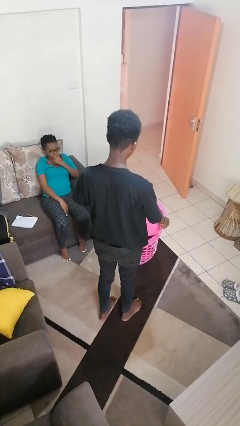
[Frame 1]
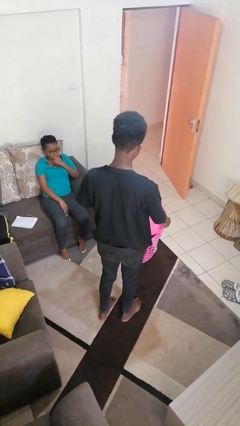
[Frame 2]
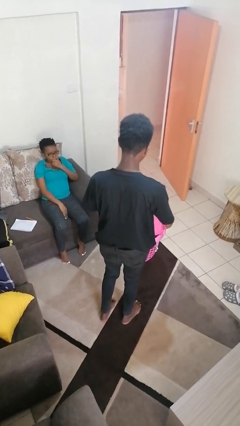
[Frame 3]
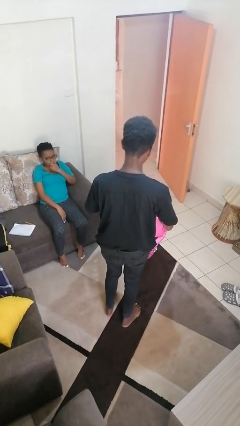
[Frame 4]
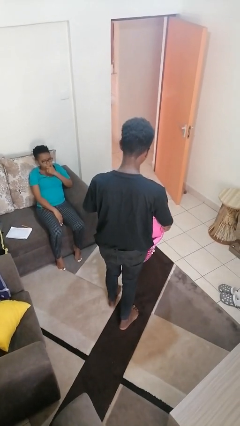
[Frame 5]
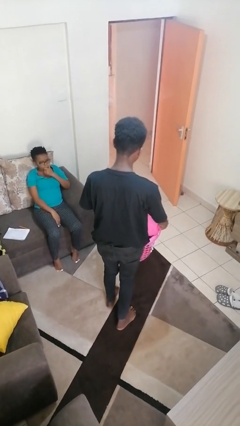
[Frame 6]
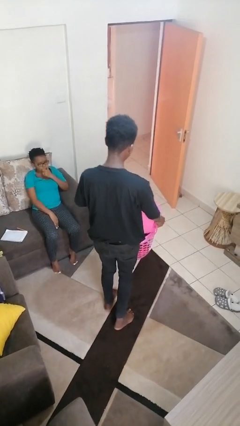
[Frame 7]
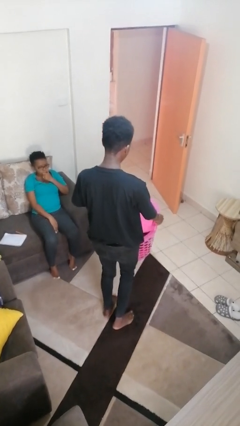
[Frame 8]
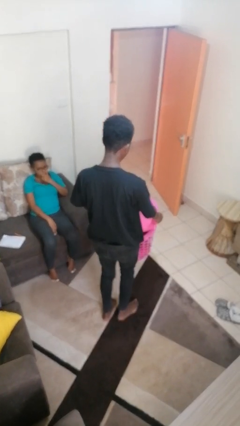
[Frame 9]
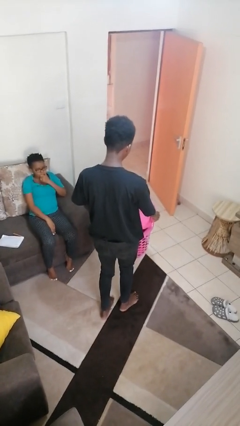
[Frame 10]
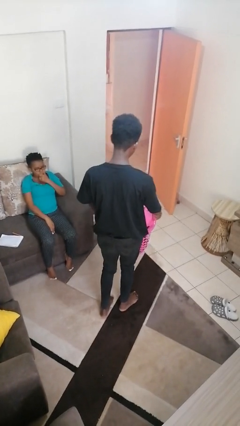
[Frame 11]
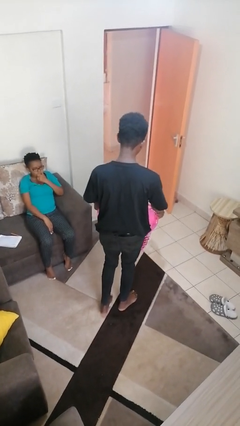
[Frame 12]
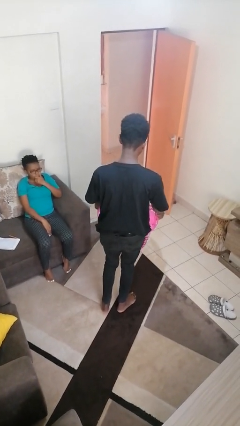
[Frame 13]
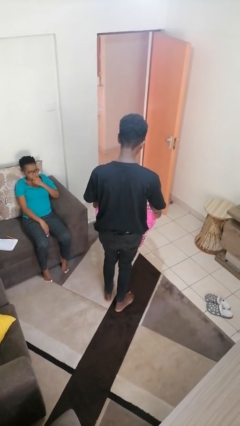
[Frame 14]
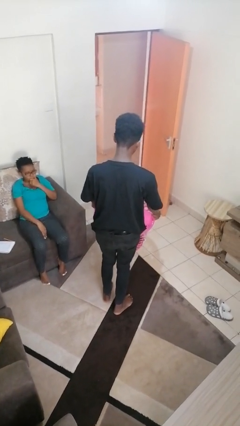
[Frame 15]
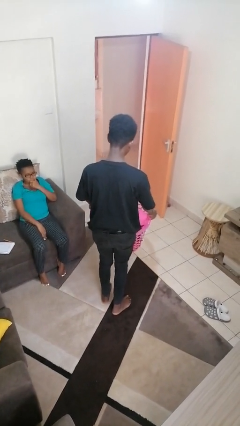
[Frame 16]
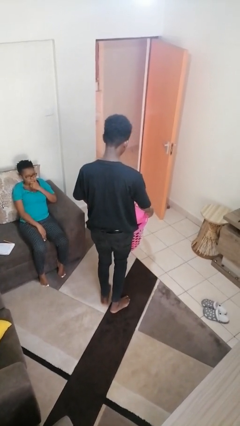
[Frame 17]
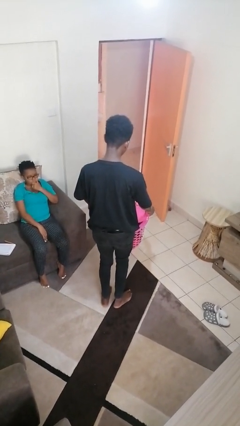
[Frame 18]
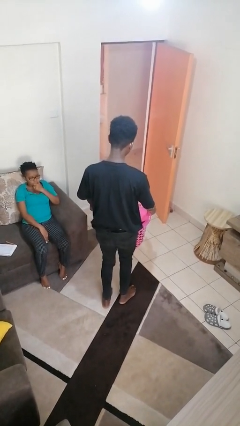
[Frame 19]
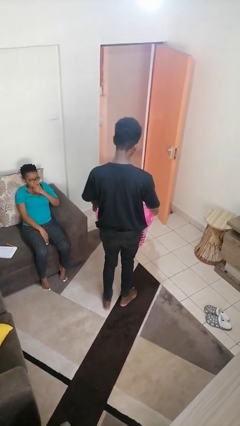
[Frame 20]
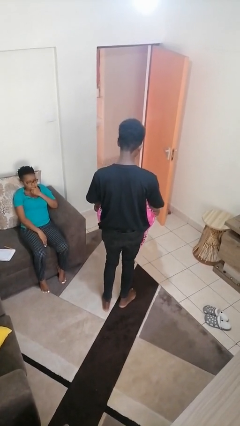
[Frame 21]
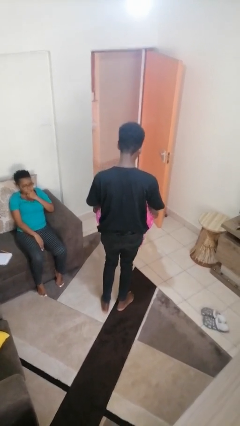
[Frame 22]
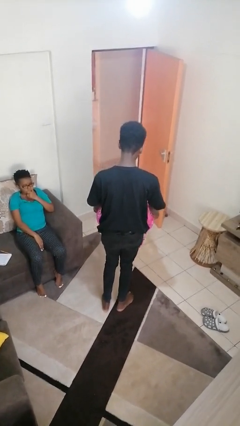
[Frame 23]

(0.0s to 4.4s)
person carries laundry basket

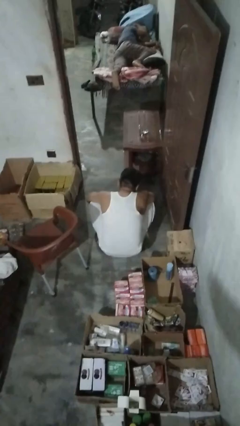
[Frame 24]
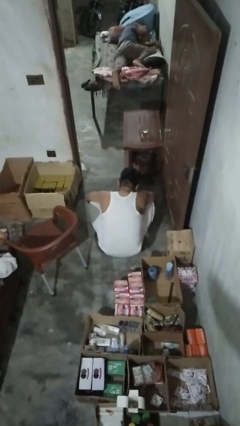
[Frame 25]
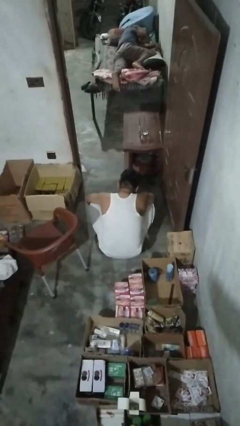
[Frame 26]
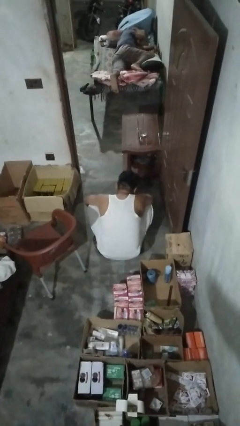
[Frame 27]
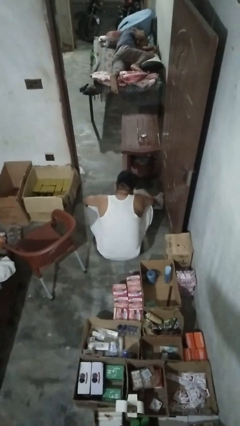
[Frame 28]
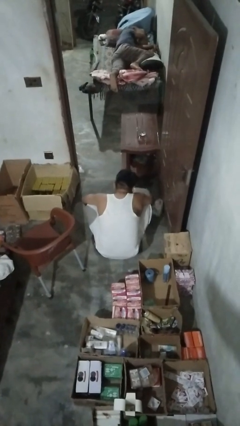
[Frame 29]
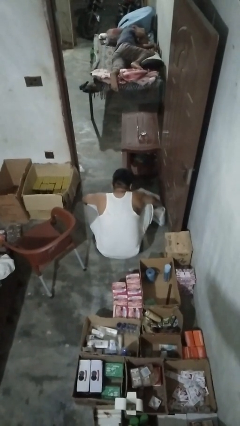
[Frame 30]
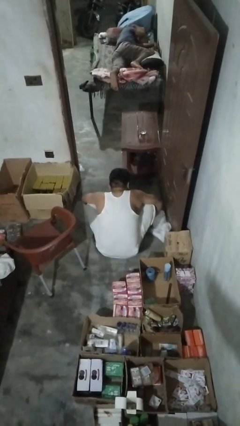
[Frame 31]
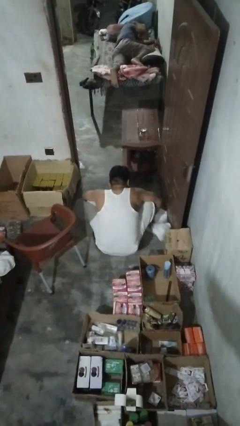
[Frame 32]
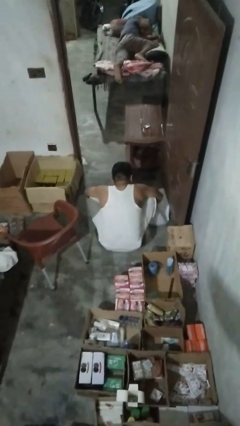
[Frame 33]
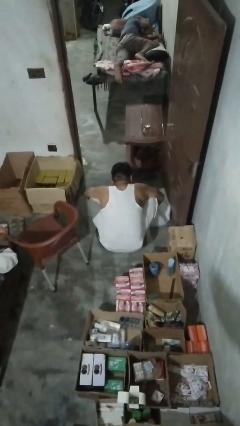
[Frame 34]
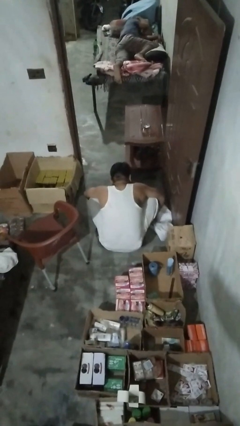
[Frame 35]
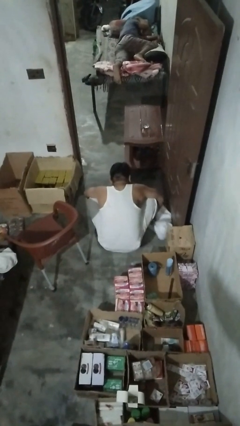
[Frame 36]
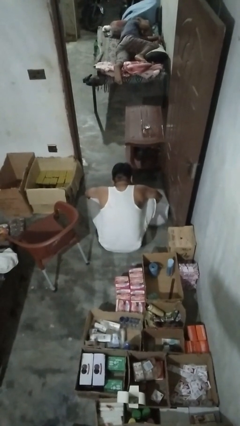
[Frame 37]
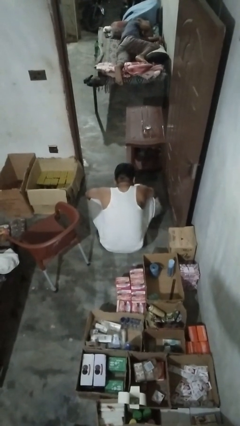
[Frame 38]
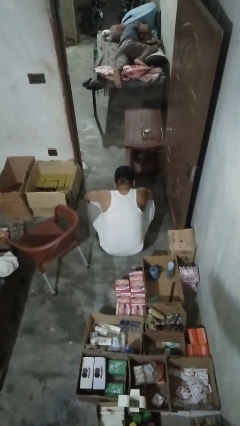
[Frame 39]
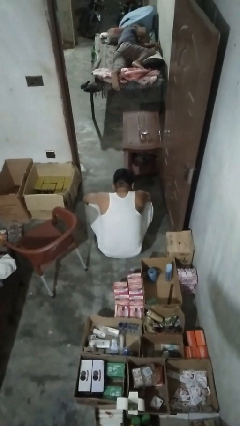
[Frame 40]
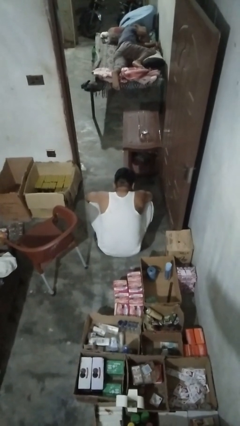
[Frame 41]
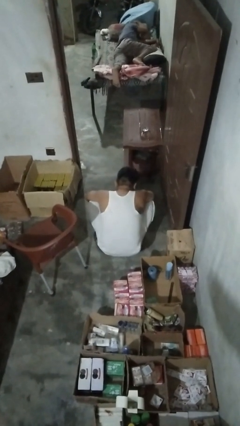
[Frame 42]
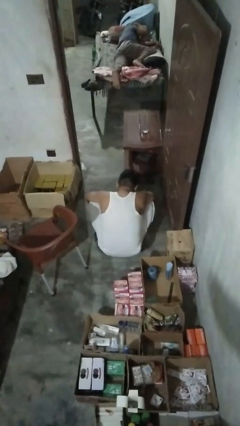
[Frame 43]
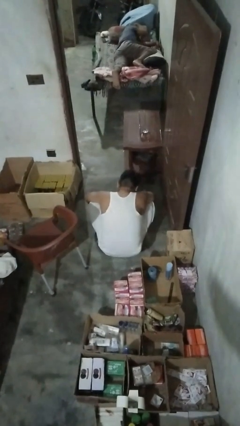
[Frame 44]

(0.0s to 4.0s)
person mops

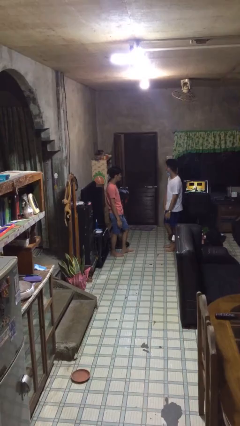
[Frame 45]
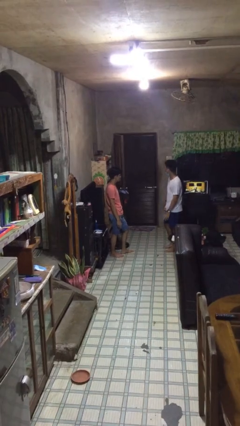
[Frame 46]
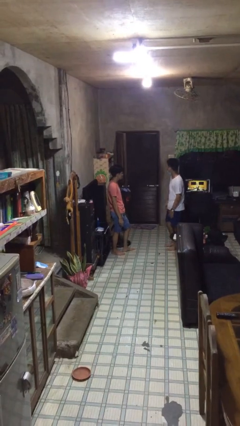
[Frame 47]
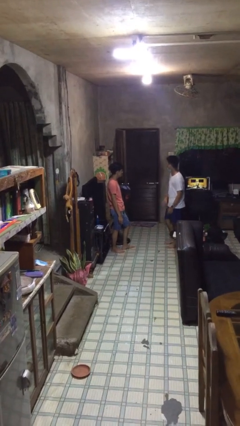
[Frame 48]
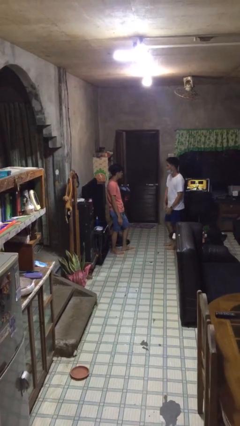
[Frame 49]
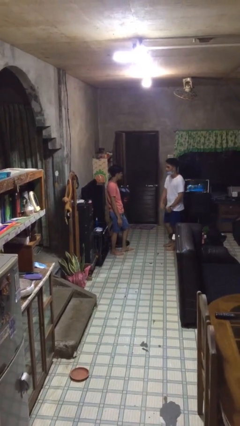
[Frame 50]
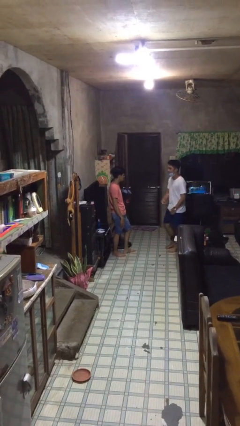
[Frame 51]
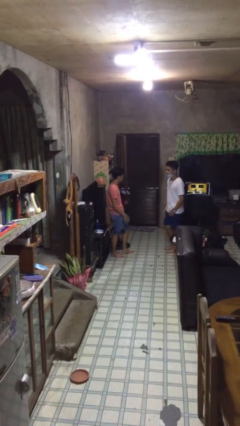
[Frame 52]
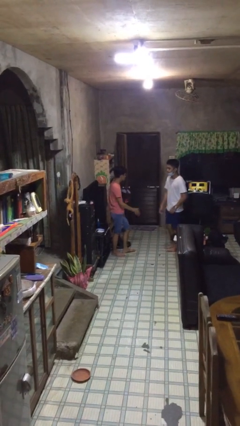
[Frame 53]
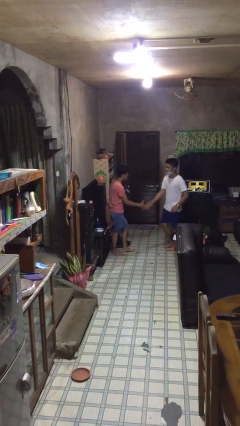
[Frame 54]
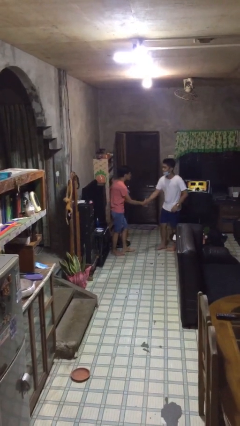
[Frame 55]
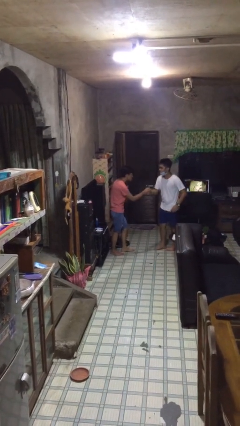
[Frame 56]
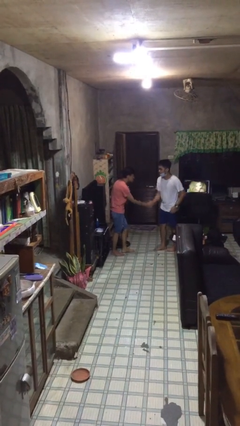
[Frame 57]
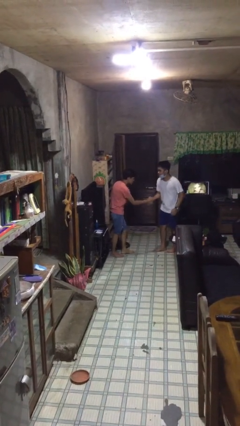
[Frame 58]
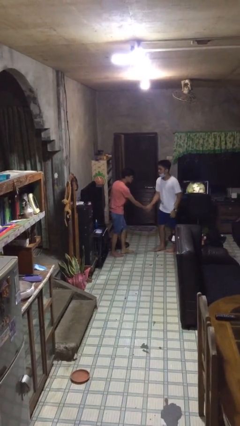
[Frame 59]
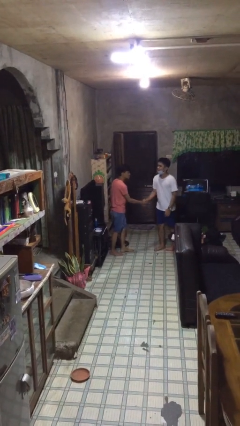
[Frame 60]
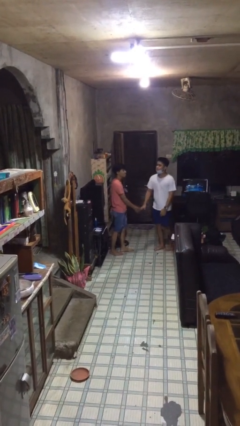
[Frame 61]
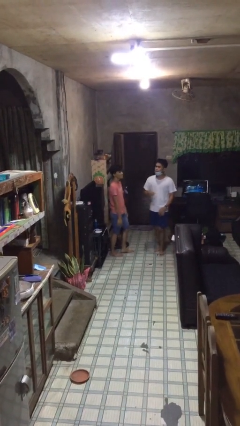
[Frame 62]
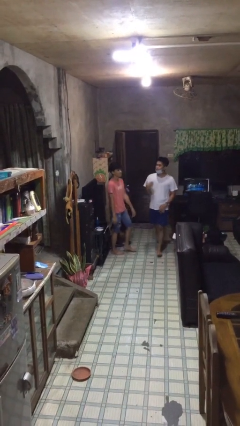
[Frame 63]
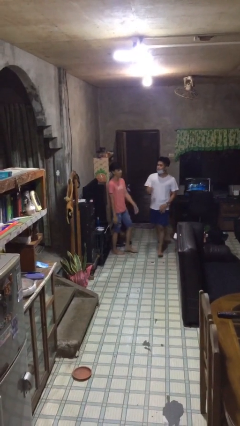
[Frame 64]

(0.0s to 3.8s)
person shakes hand

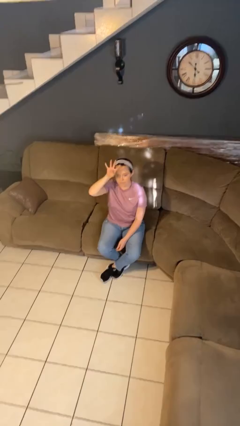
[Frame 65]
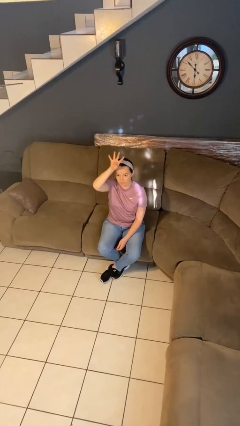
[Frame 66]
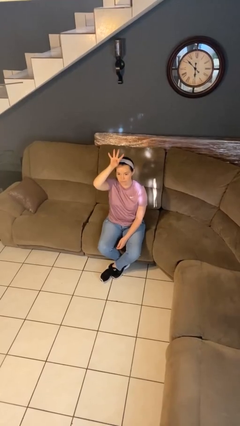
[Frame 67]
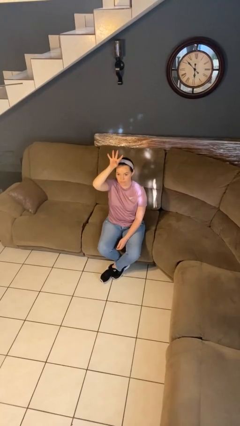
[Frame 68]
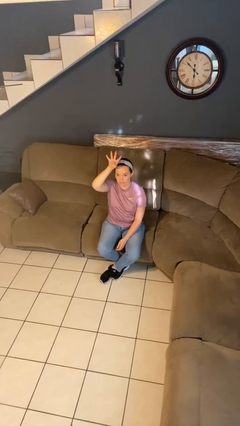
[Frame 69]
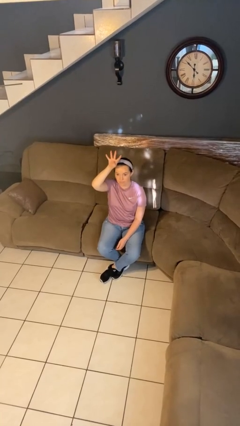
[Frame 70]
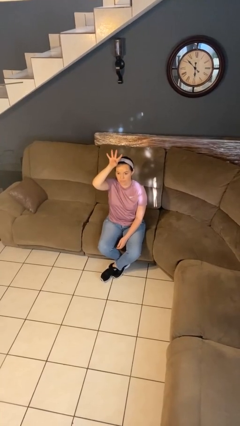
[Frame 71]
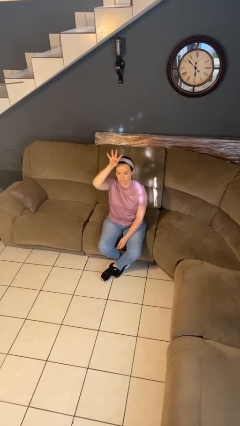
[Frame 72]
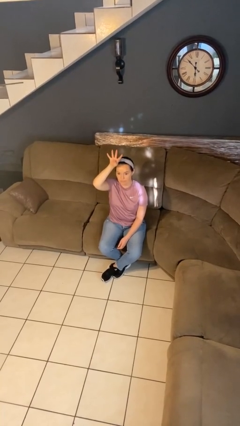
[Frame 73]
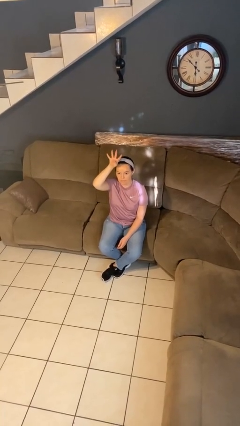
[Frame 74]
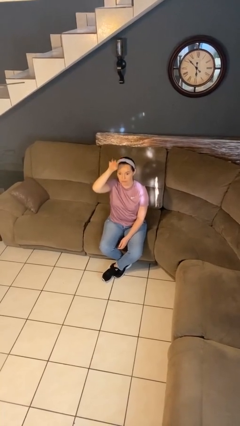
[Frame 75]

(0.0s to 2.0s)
person gestures number four

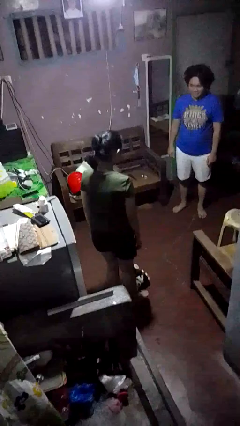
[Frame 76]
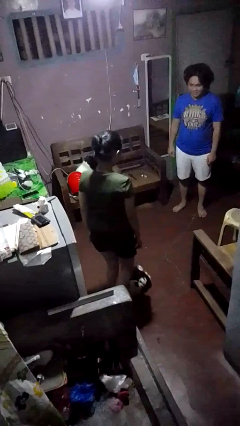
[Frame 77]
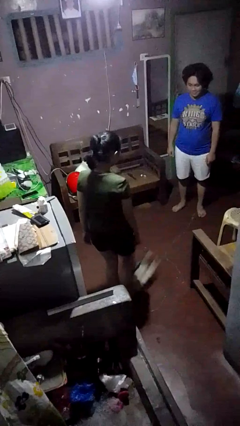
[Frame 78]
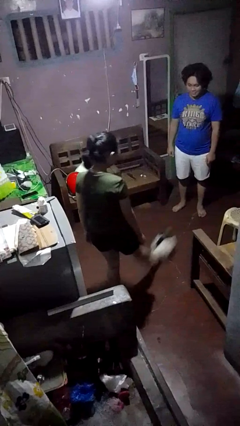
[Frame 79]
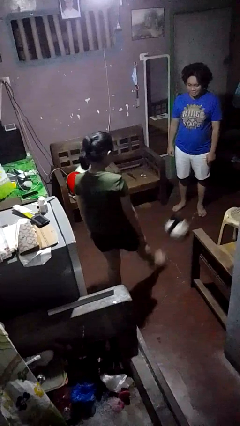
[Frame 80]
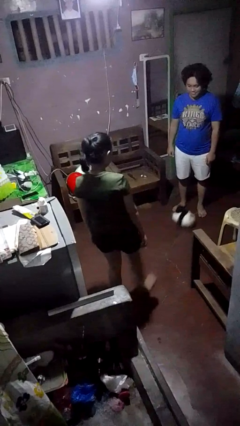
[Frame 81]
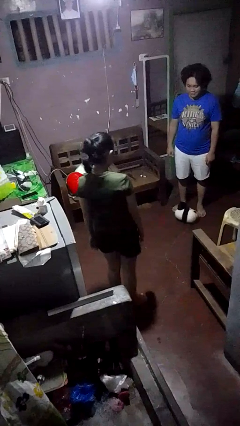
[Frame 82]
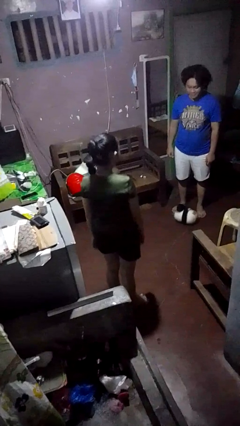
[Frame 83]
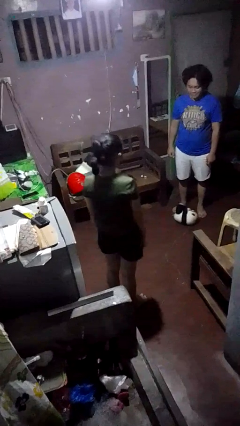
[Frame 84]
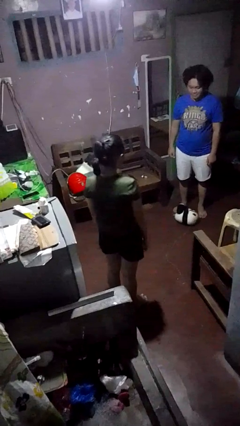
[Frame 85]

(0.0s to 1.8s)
person kicks object to person

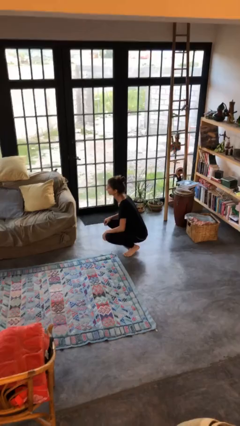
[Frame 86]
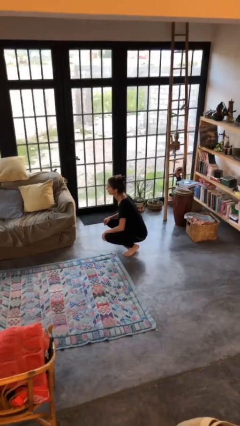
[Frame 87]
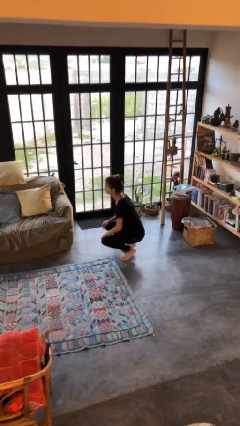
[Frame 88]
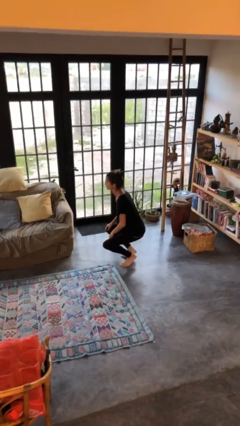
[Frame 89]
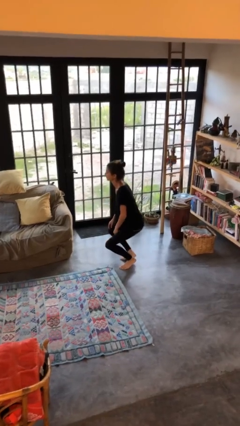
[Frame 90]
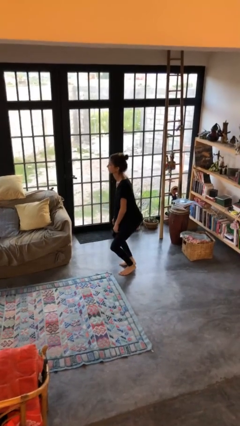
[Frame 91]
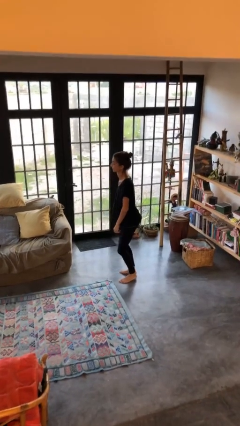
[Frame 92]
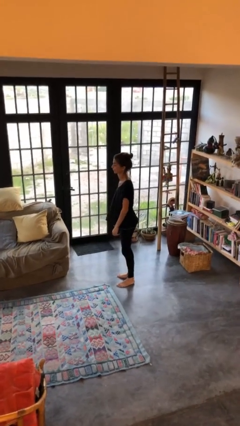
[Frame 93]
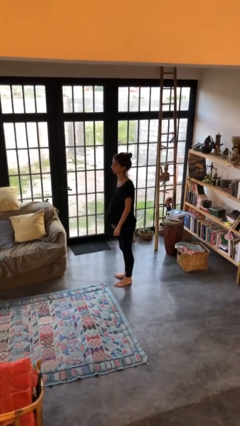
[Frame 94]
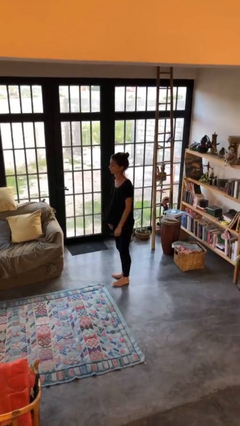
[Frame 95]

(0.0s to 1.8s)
person stands up
